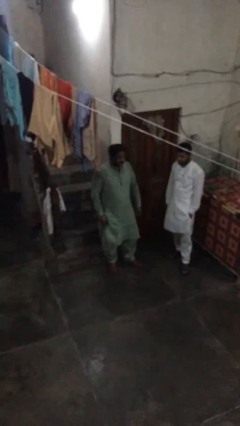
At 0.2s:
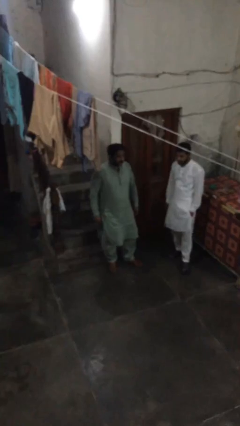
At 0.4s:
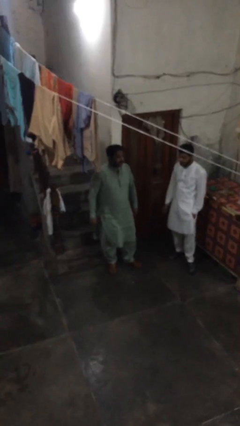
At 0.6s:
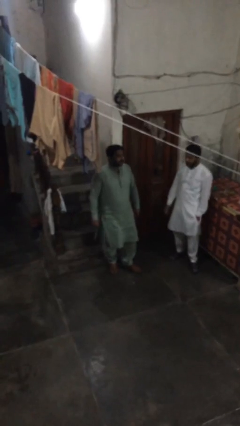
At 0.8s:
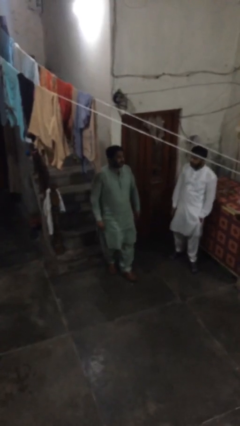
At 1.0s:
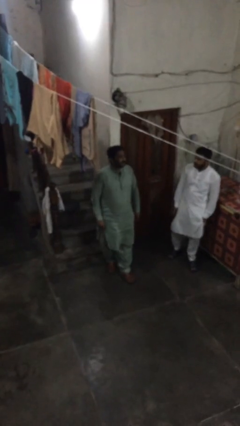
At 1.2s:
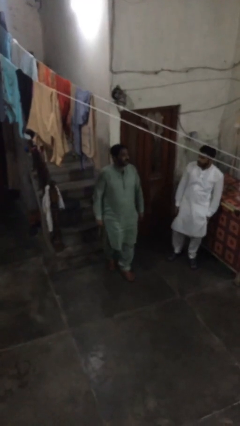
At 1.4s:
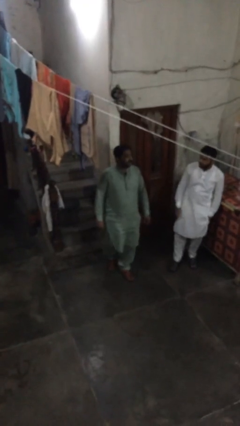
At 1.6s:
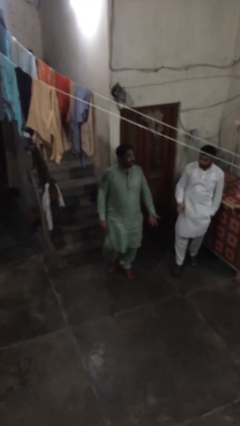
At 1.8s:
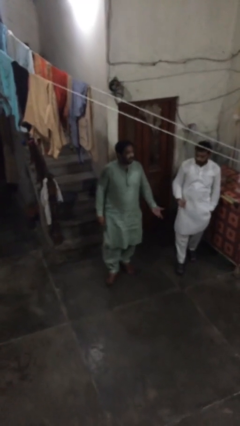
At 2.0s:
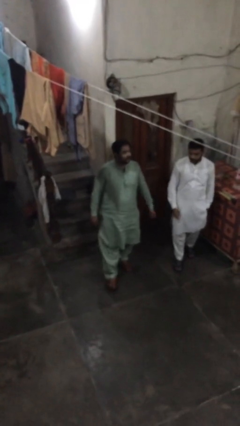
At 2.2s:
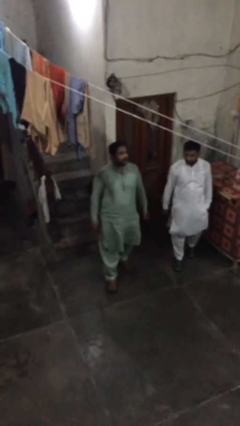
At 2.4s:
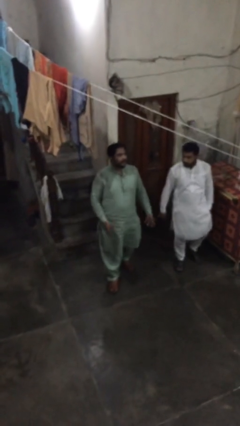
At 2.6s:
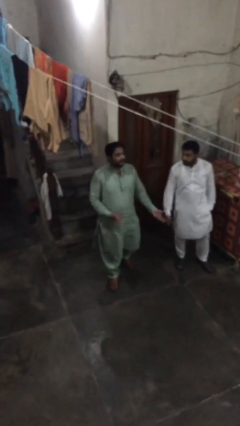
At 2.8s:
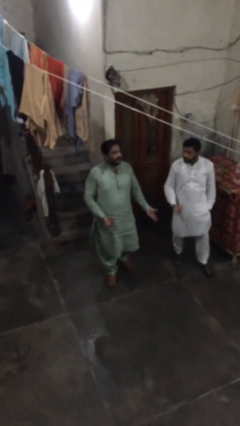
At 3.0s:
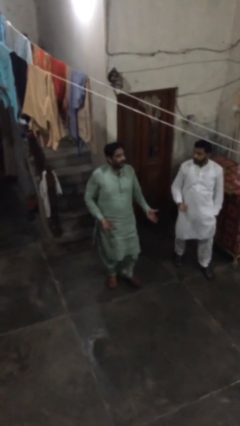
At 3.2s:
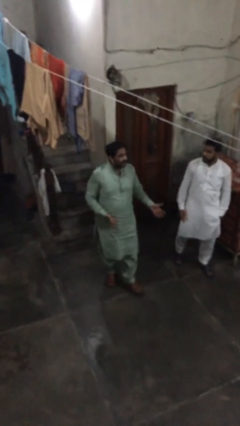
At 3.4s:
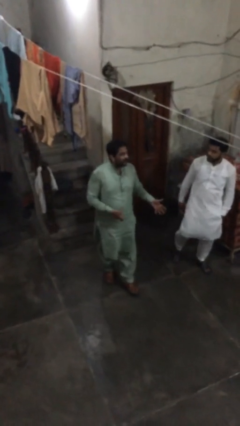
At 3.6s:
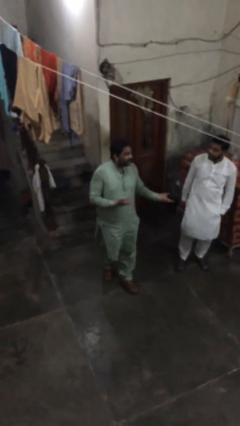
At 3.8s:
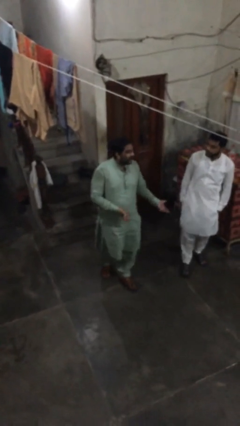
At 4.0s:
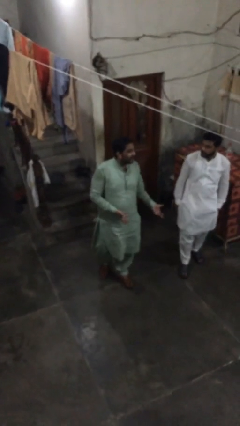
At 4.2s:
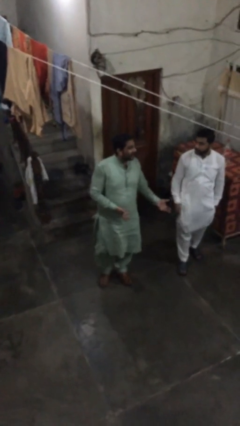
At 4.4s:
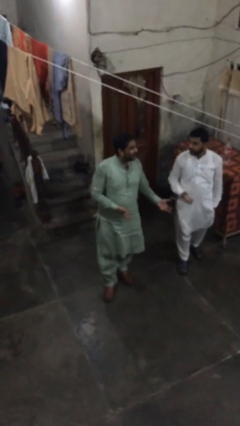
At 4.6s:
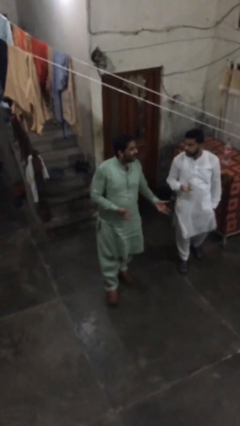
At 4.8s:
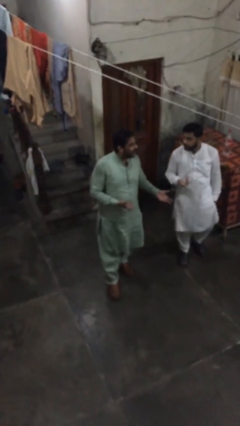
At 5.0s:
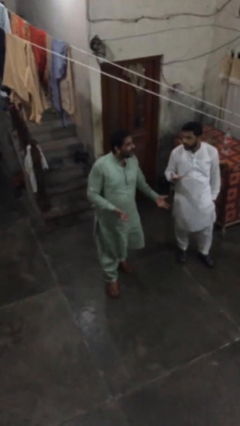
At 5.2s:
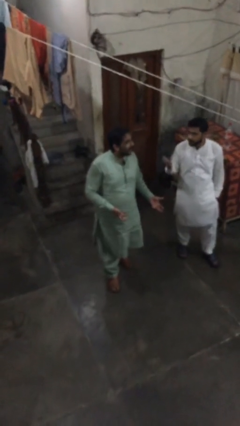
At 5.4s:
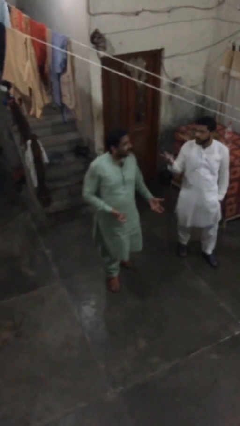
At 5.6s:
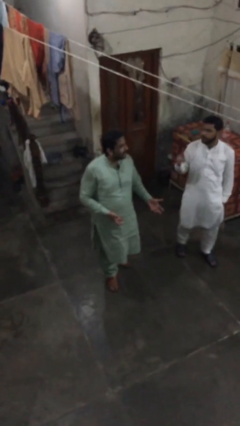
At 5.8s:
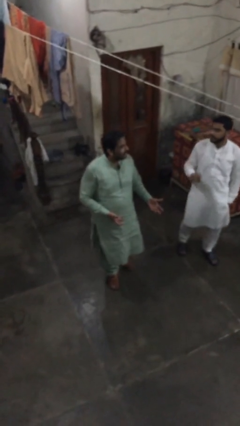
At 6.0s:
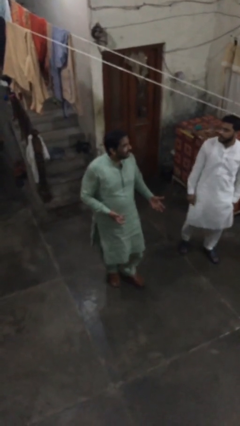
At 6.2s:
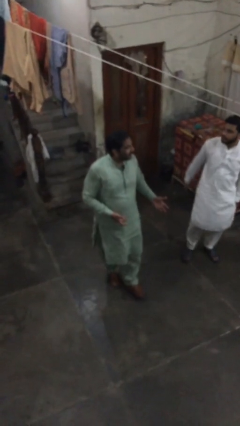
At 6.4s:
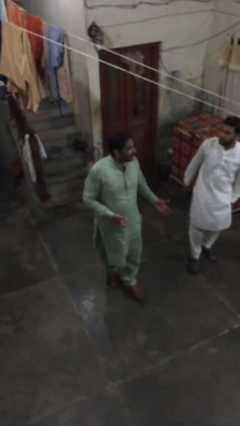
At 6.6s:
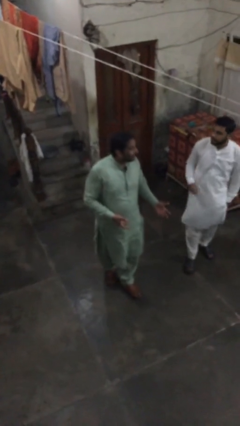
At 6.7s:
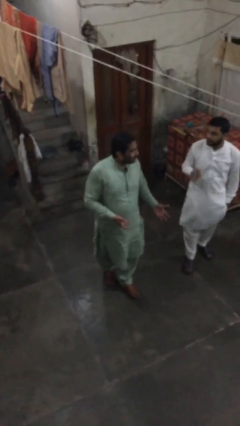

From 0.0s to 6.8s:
person talks to person

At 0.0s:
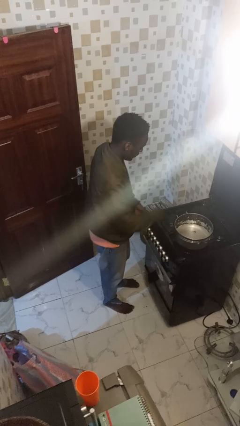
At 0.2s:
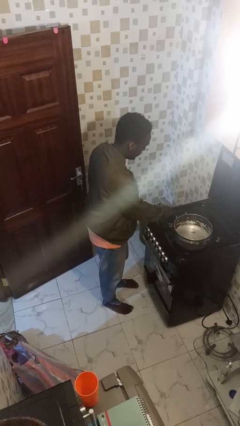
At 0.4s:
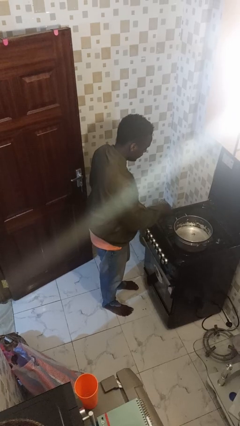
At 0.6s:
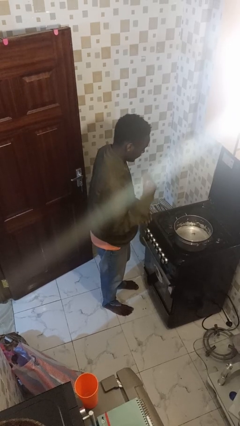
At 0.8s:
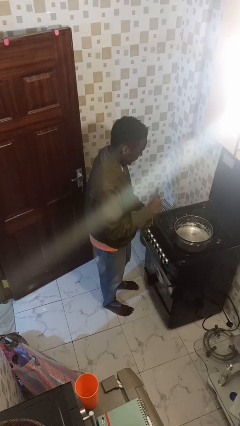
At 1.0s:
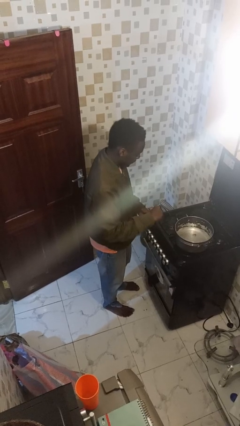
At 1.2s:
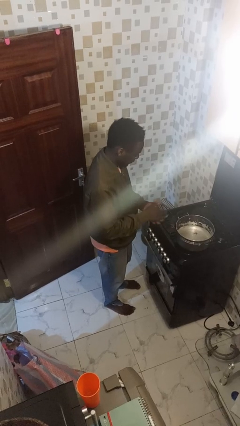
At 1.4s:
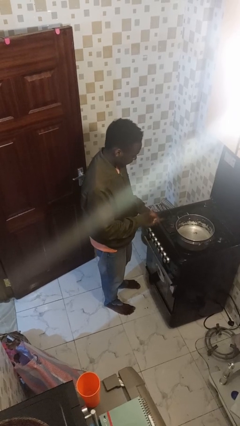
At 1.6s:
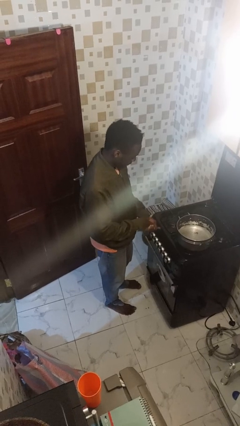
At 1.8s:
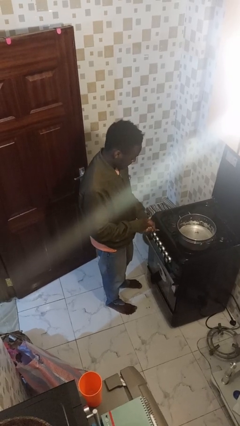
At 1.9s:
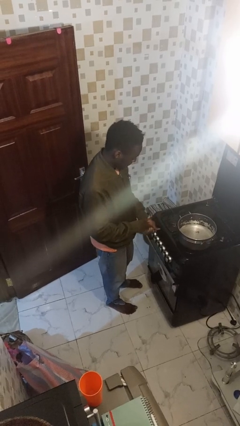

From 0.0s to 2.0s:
person burns hand

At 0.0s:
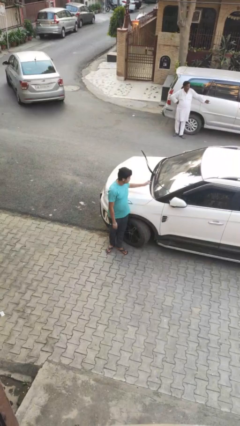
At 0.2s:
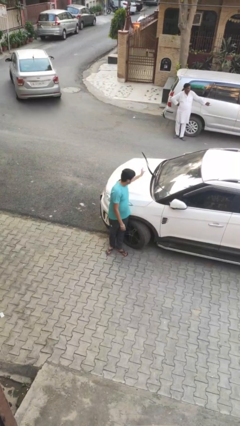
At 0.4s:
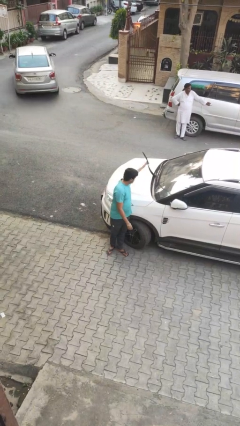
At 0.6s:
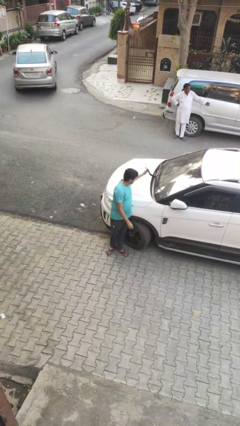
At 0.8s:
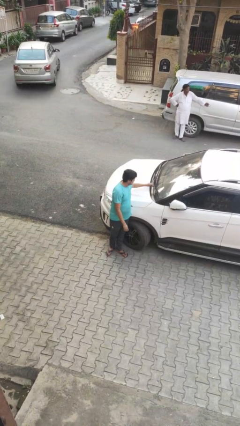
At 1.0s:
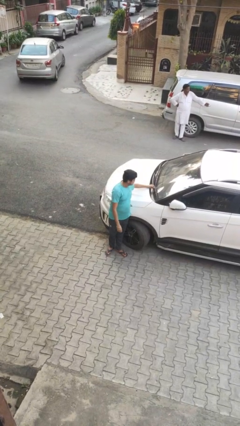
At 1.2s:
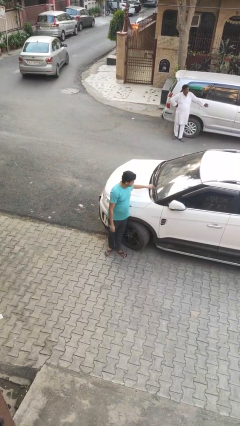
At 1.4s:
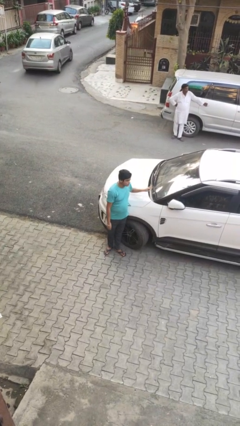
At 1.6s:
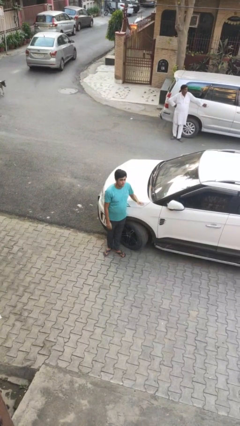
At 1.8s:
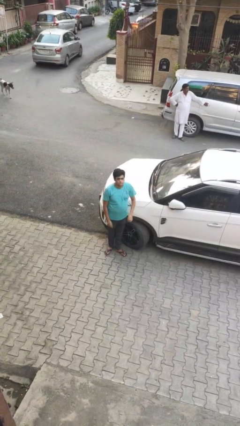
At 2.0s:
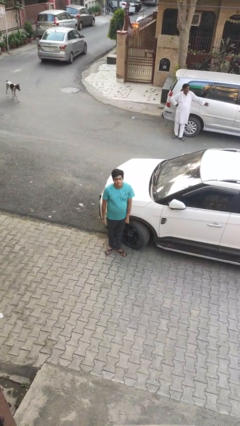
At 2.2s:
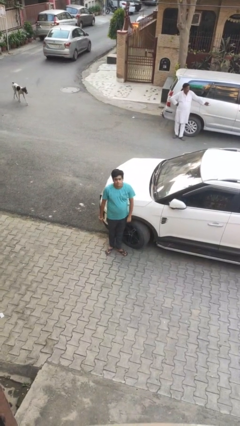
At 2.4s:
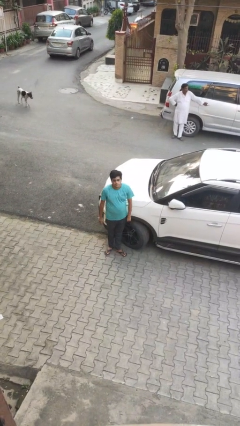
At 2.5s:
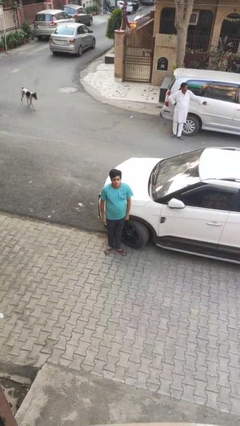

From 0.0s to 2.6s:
person flips down car wipers

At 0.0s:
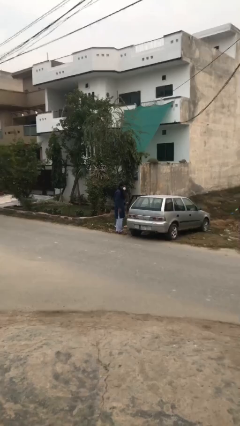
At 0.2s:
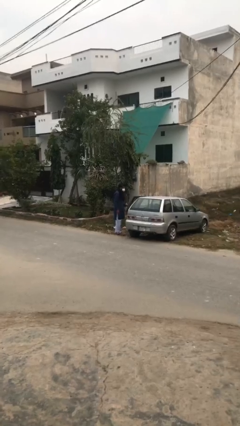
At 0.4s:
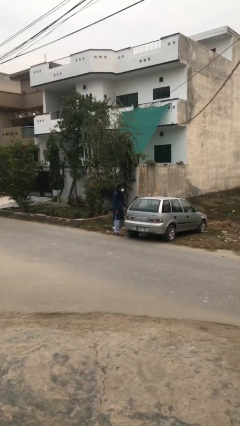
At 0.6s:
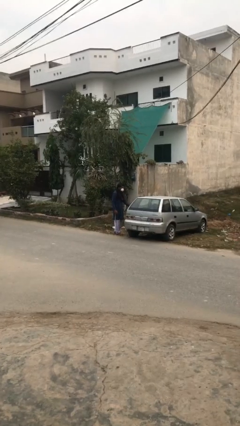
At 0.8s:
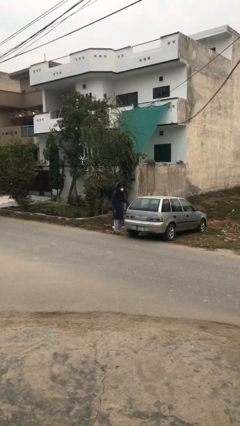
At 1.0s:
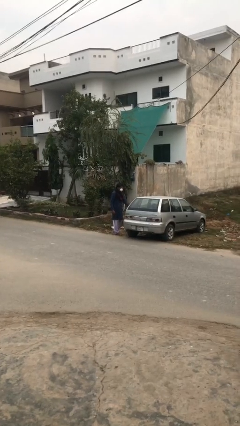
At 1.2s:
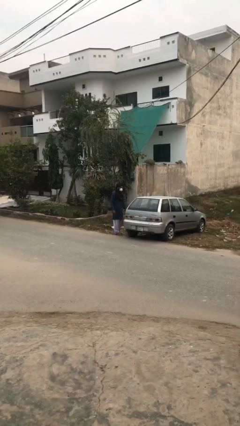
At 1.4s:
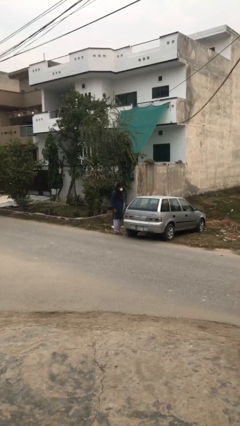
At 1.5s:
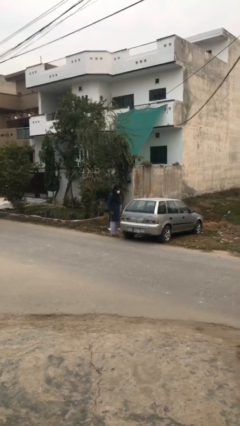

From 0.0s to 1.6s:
person closes car door

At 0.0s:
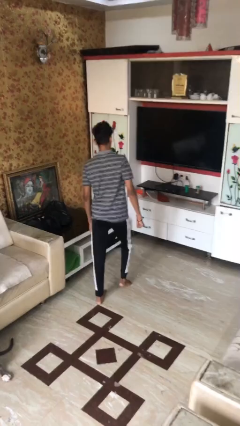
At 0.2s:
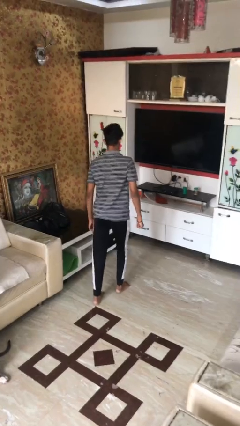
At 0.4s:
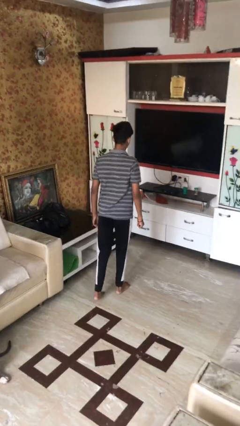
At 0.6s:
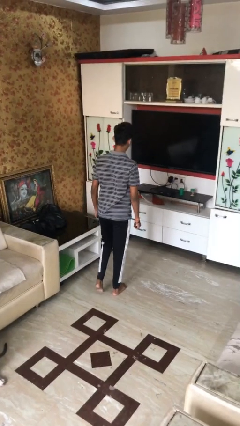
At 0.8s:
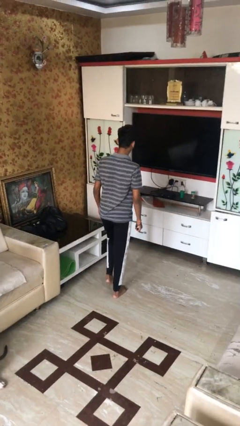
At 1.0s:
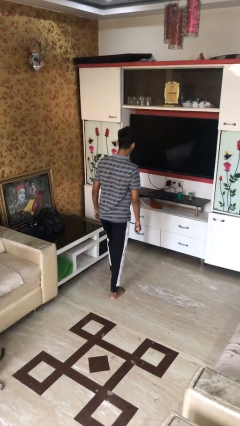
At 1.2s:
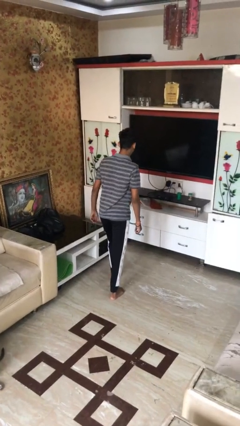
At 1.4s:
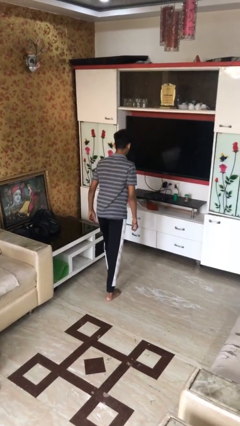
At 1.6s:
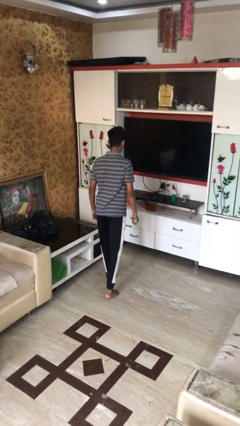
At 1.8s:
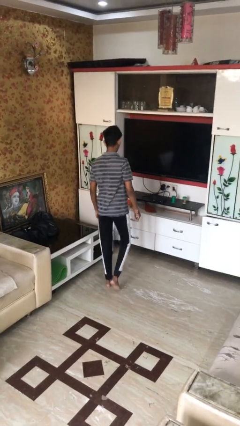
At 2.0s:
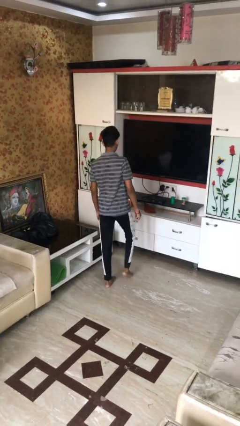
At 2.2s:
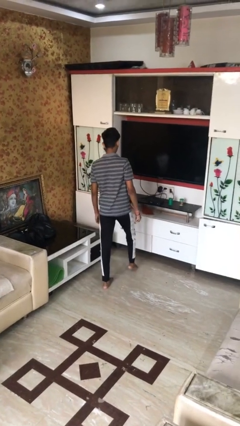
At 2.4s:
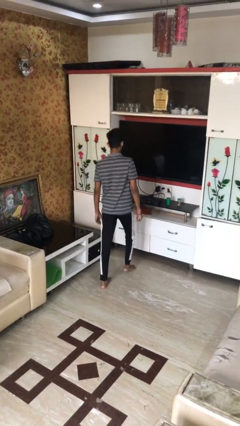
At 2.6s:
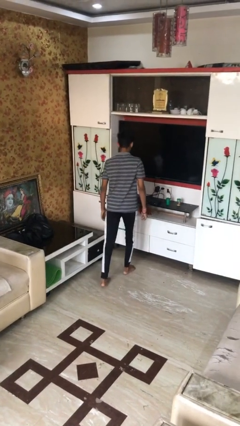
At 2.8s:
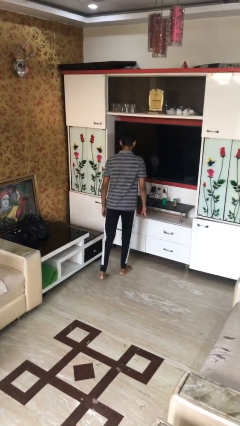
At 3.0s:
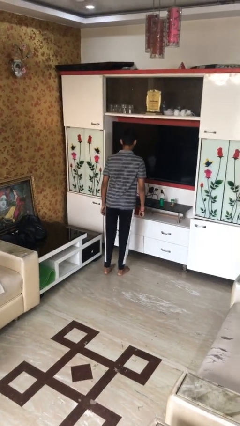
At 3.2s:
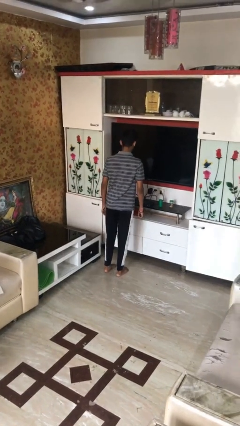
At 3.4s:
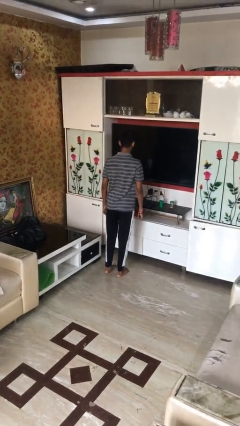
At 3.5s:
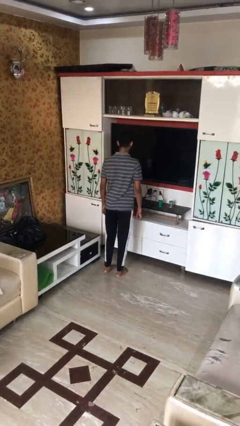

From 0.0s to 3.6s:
person walks tiptoe

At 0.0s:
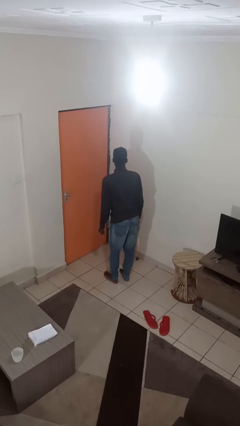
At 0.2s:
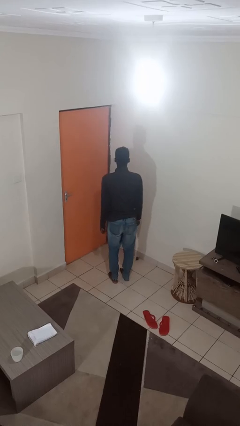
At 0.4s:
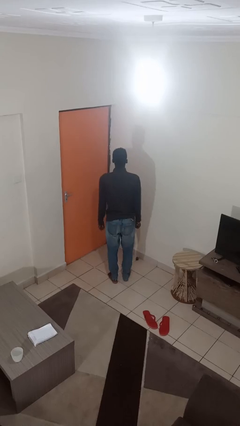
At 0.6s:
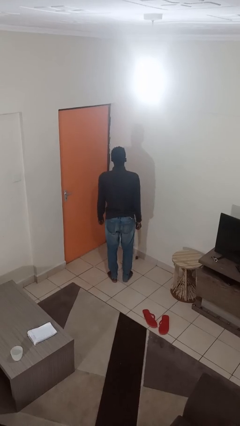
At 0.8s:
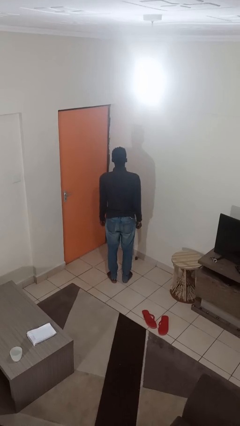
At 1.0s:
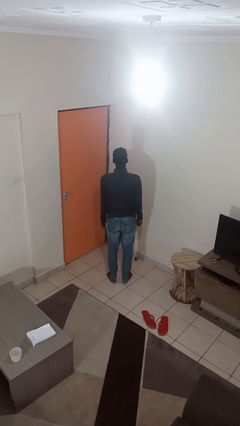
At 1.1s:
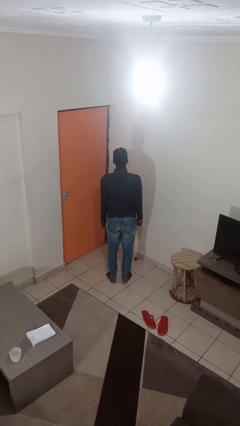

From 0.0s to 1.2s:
person wiggles hips
